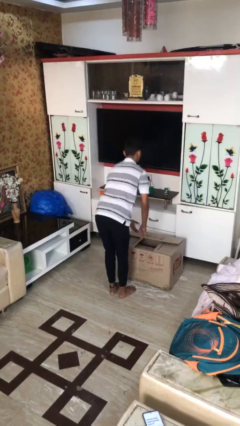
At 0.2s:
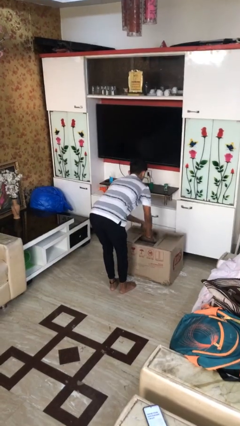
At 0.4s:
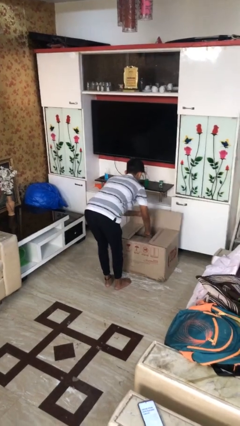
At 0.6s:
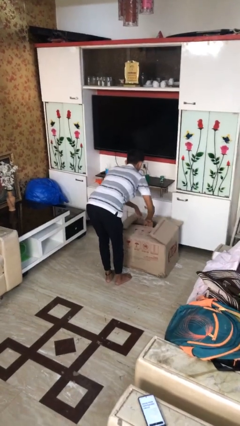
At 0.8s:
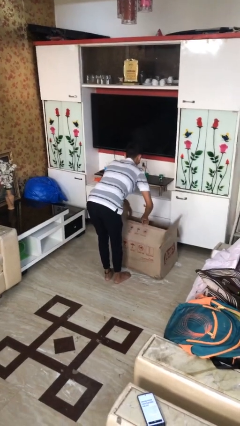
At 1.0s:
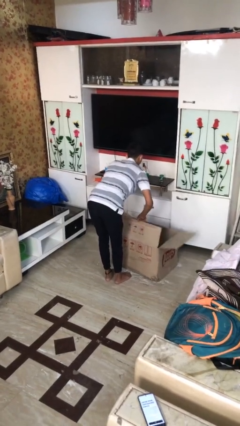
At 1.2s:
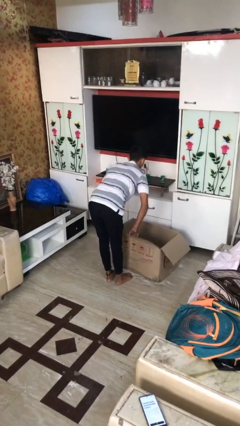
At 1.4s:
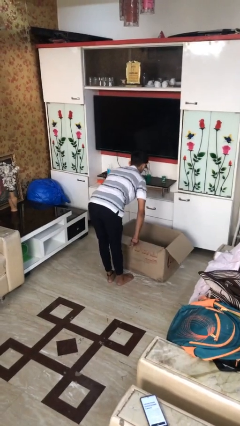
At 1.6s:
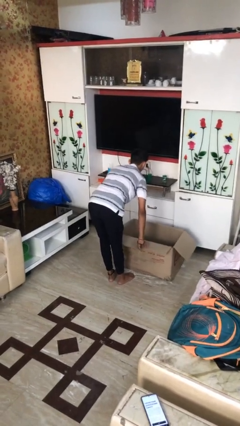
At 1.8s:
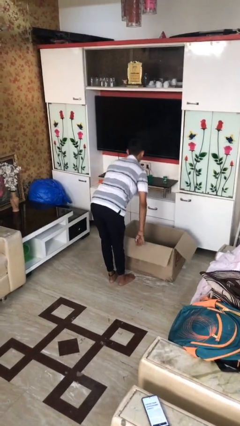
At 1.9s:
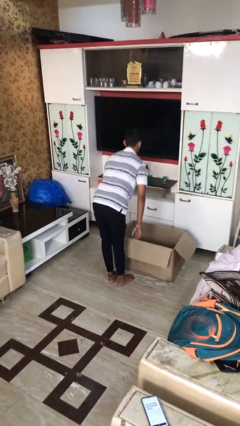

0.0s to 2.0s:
person opens box

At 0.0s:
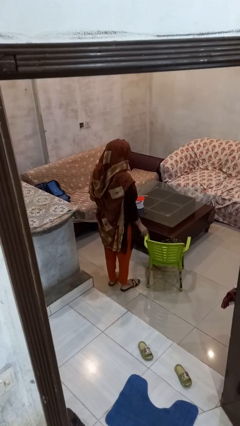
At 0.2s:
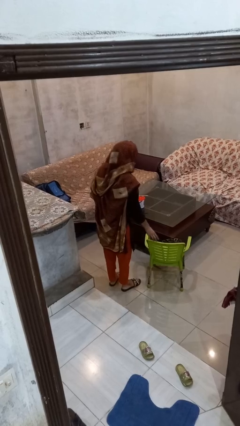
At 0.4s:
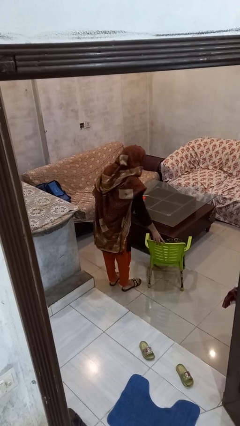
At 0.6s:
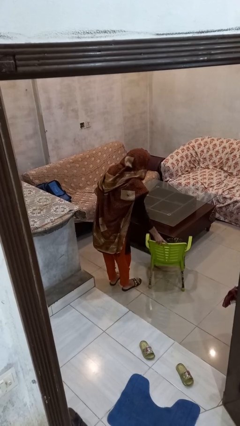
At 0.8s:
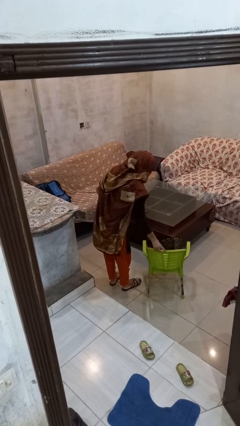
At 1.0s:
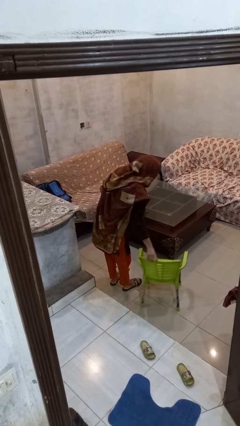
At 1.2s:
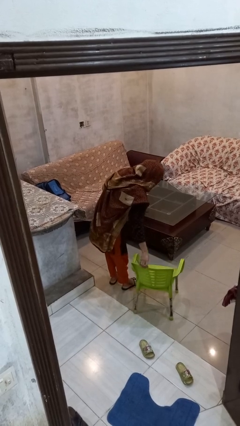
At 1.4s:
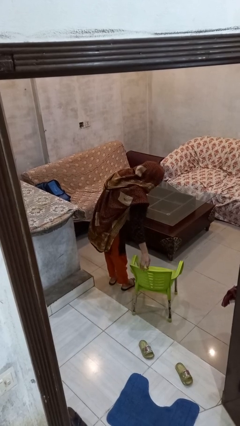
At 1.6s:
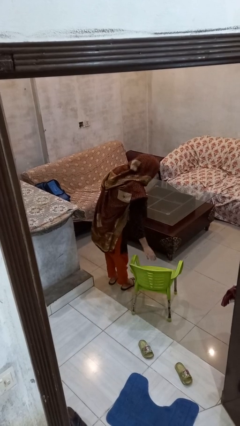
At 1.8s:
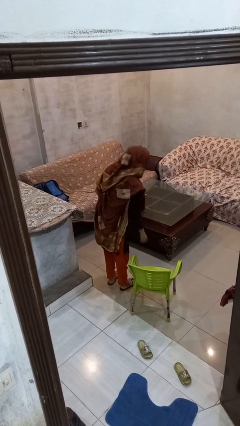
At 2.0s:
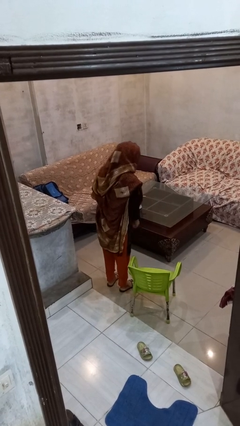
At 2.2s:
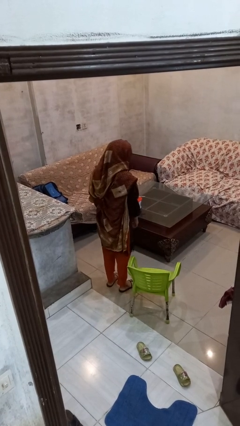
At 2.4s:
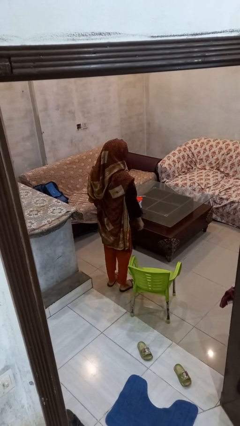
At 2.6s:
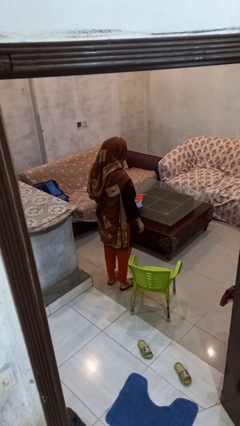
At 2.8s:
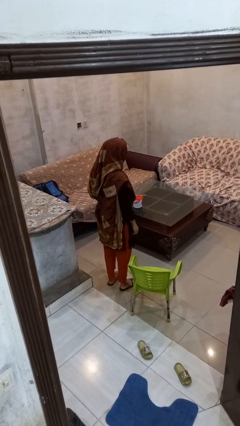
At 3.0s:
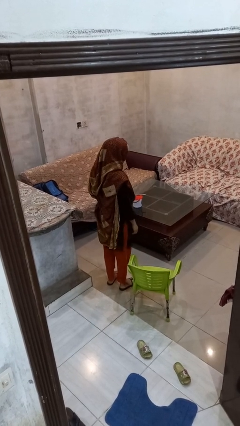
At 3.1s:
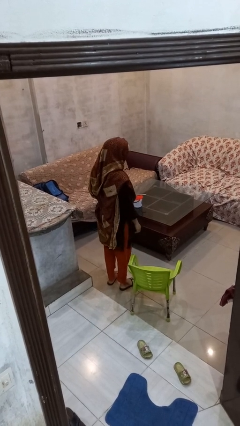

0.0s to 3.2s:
person pulls out chair

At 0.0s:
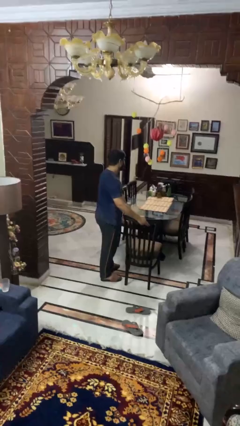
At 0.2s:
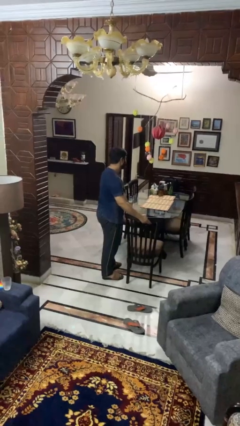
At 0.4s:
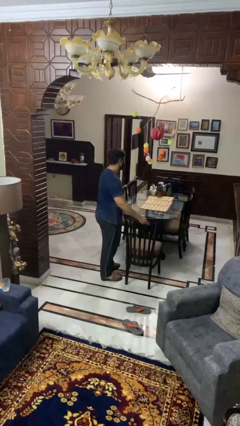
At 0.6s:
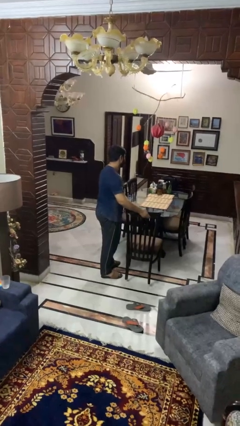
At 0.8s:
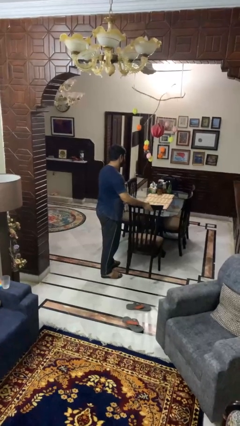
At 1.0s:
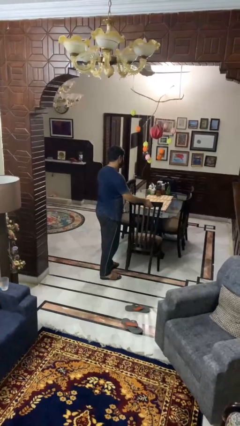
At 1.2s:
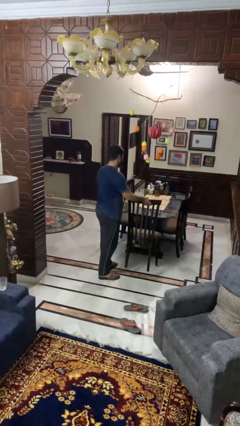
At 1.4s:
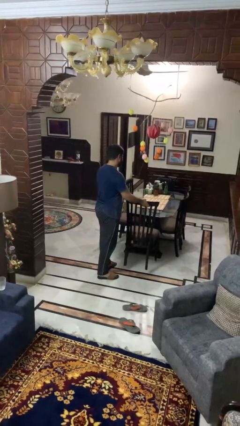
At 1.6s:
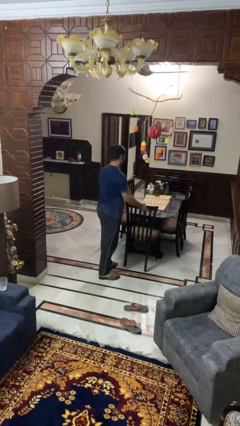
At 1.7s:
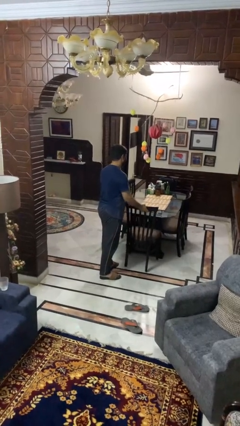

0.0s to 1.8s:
person pushes in chair

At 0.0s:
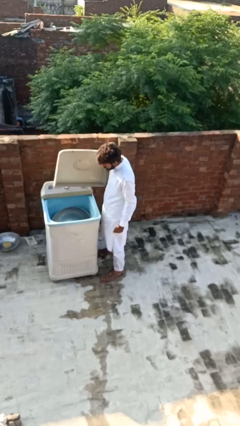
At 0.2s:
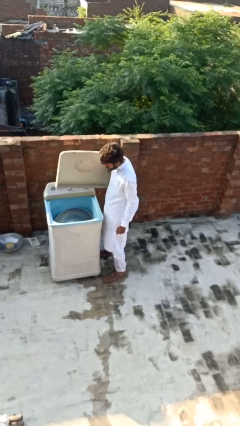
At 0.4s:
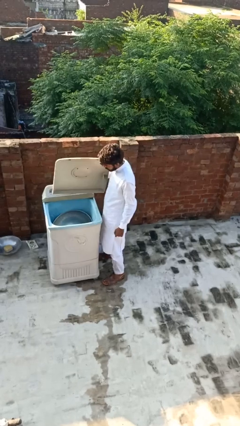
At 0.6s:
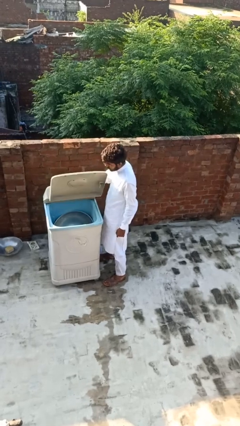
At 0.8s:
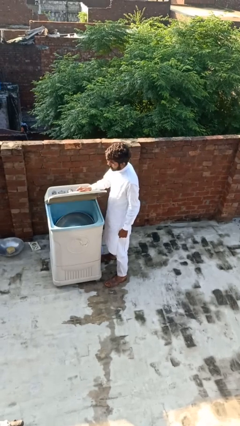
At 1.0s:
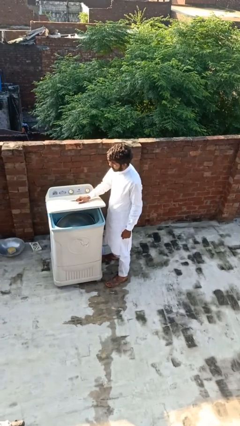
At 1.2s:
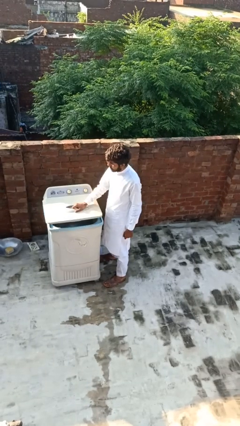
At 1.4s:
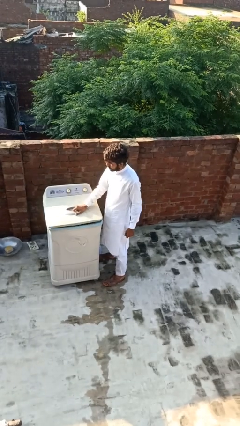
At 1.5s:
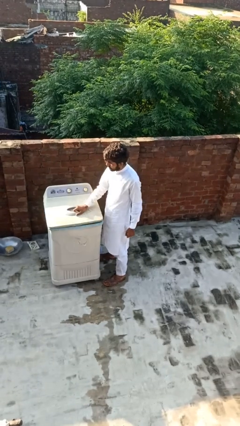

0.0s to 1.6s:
person closes clothes washer

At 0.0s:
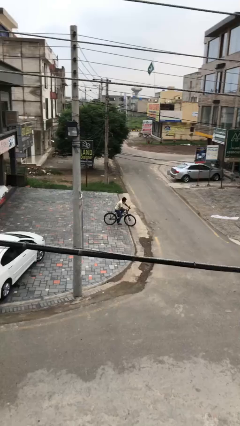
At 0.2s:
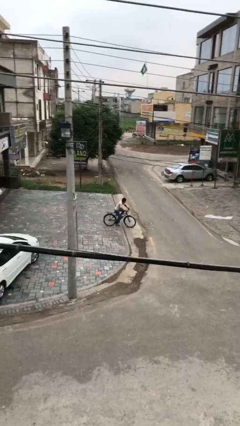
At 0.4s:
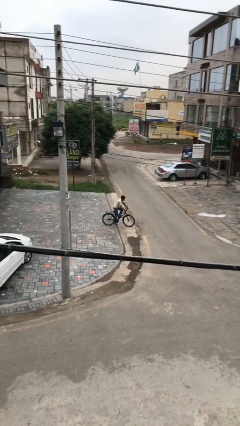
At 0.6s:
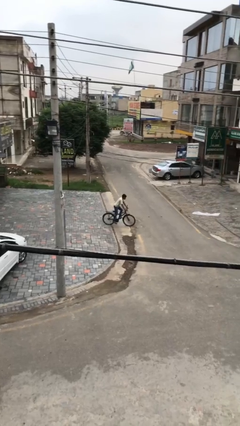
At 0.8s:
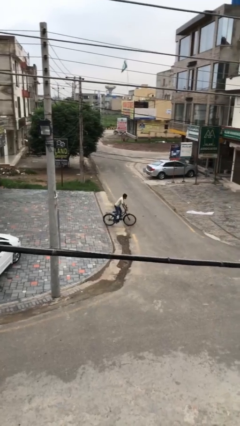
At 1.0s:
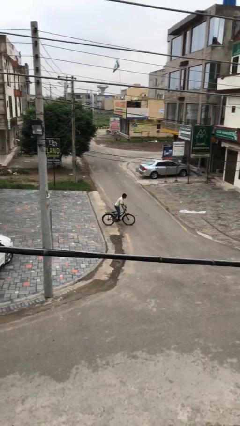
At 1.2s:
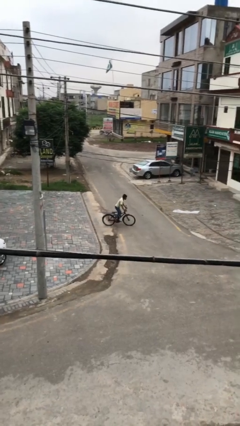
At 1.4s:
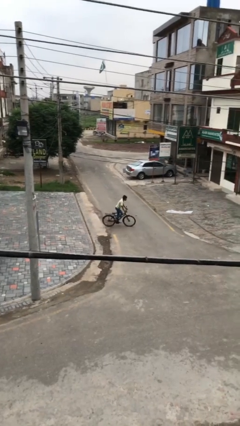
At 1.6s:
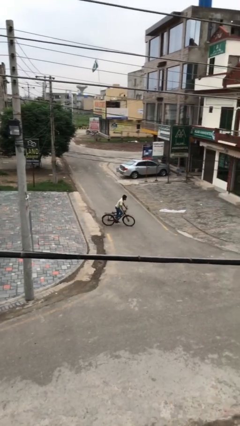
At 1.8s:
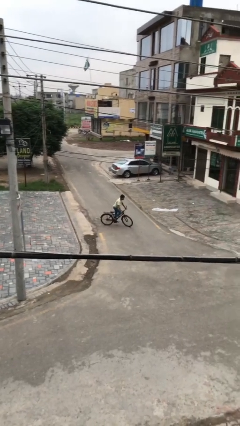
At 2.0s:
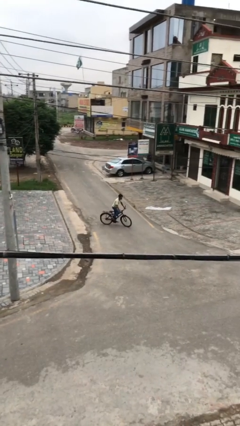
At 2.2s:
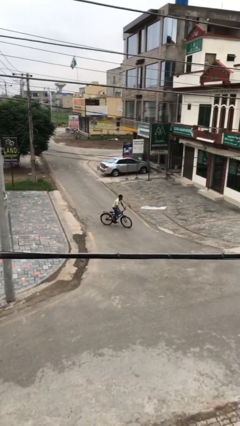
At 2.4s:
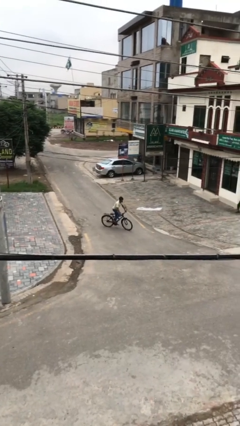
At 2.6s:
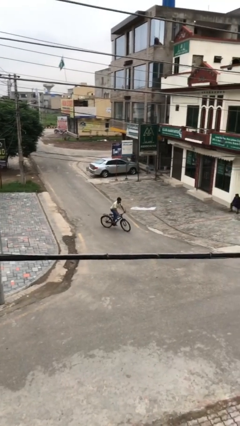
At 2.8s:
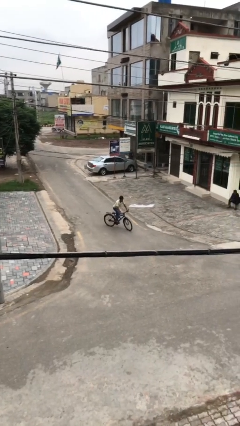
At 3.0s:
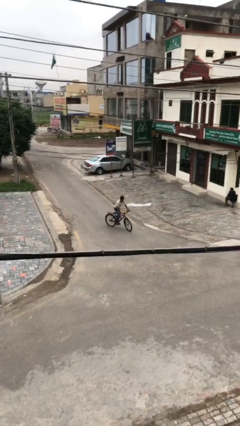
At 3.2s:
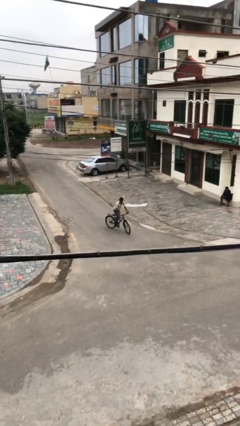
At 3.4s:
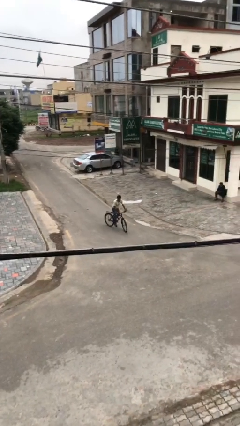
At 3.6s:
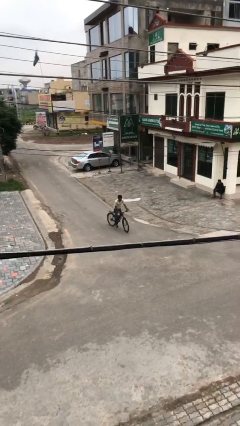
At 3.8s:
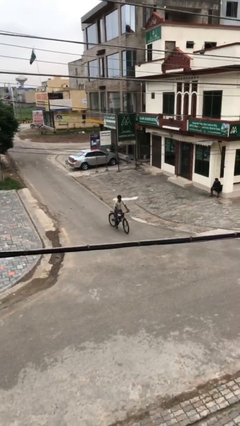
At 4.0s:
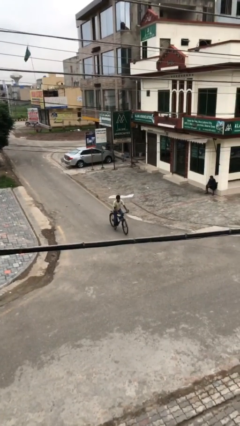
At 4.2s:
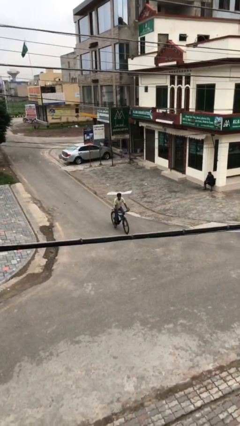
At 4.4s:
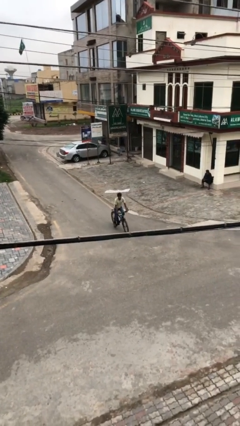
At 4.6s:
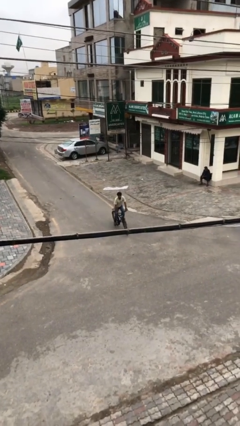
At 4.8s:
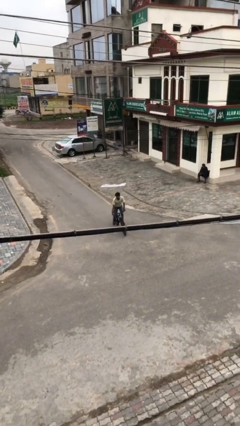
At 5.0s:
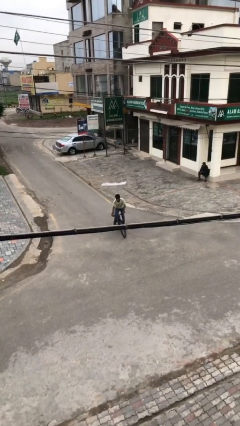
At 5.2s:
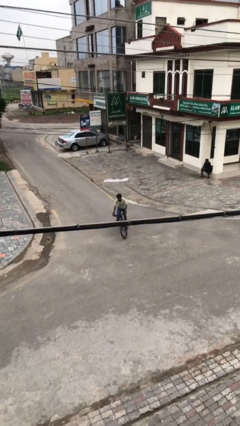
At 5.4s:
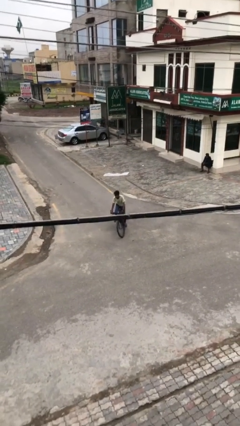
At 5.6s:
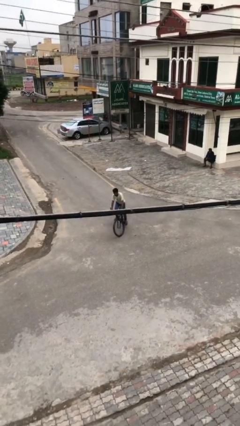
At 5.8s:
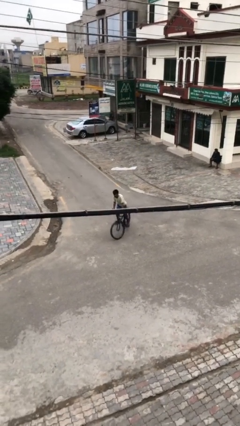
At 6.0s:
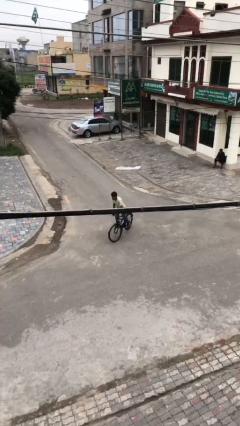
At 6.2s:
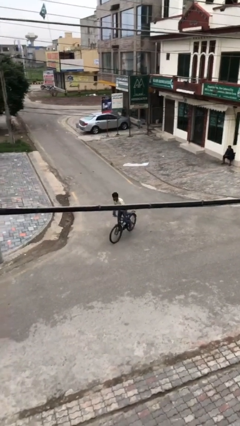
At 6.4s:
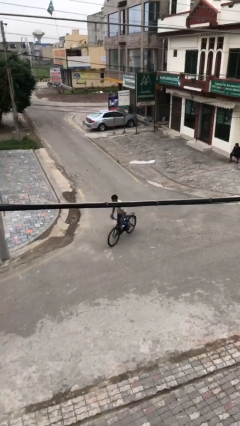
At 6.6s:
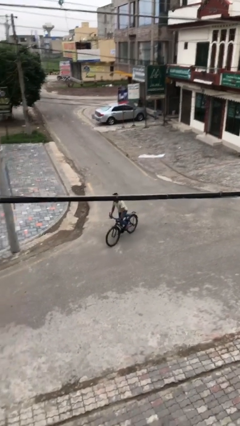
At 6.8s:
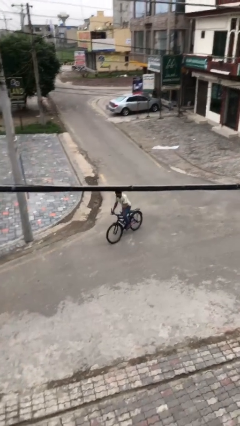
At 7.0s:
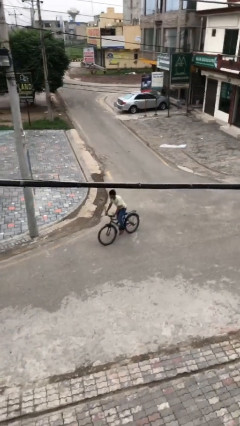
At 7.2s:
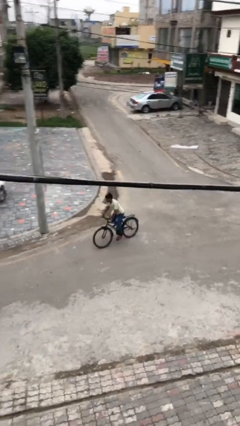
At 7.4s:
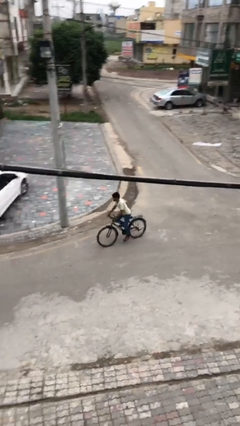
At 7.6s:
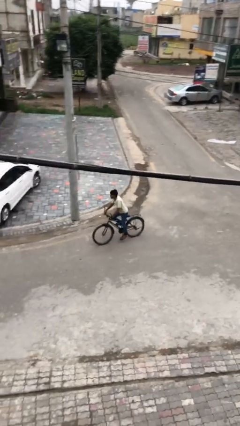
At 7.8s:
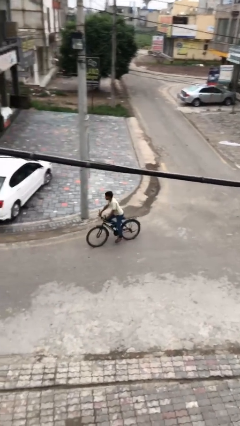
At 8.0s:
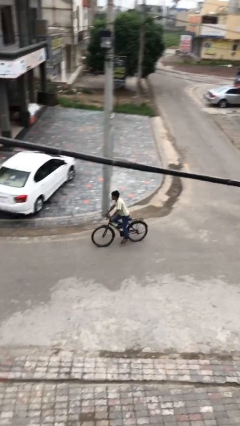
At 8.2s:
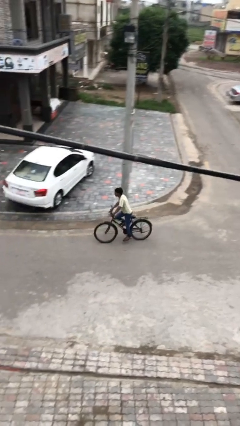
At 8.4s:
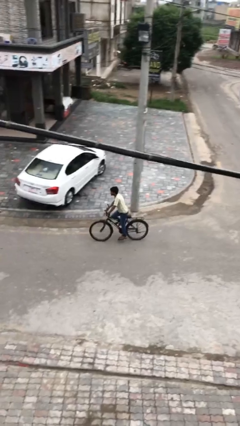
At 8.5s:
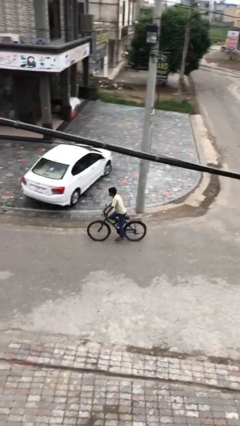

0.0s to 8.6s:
person rides bicycle

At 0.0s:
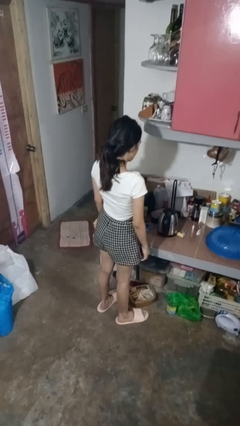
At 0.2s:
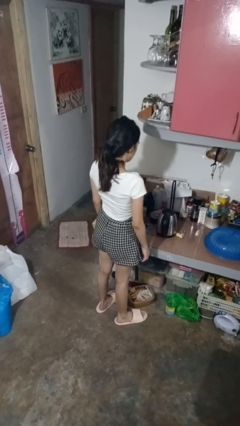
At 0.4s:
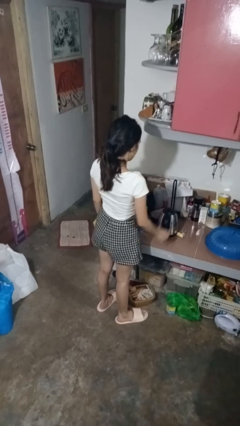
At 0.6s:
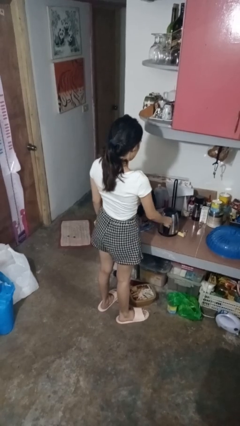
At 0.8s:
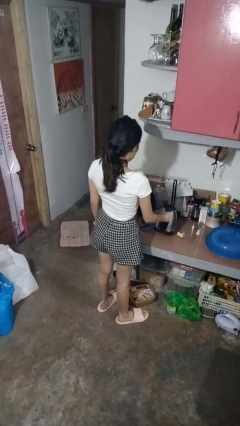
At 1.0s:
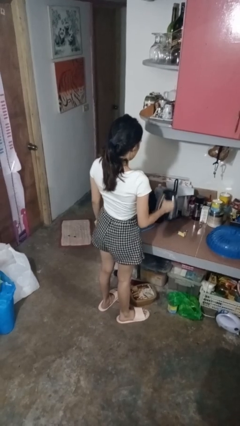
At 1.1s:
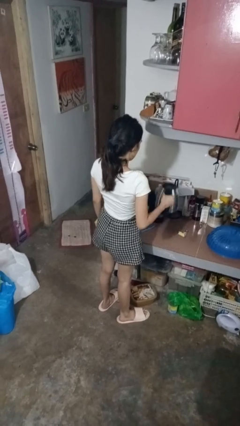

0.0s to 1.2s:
person picks up object from countertop
